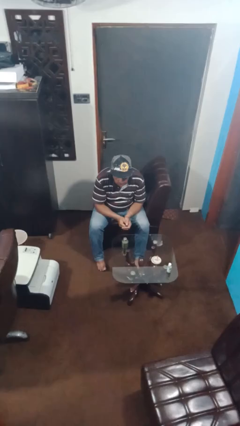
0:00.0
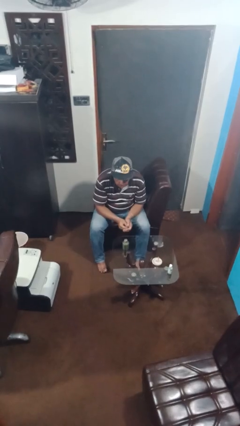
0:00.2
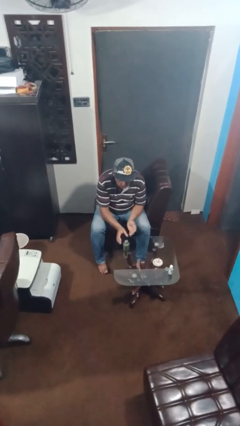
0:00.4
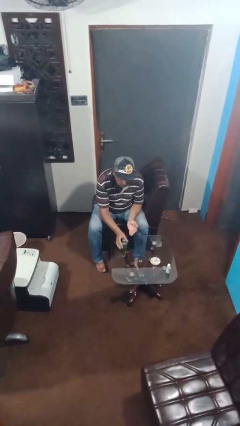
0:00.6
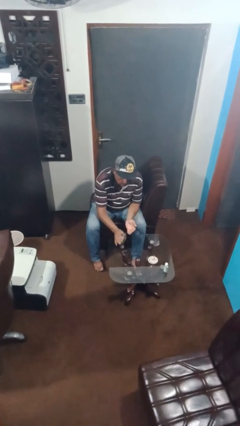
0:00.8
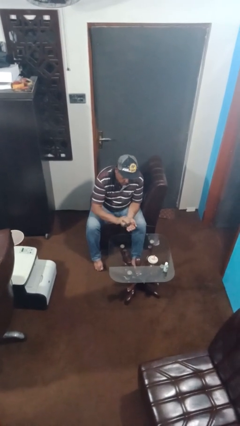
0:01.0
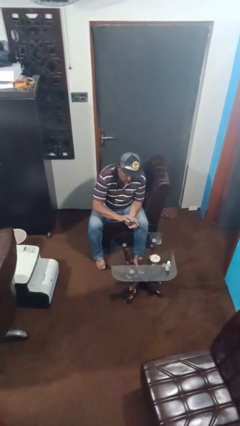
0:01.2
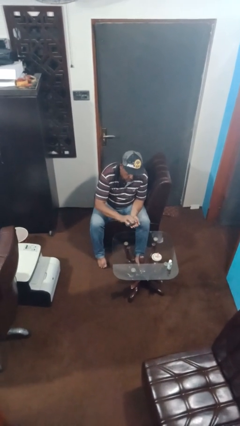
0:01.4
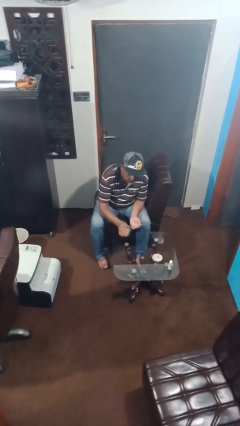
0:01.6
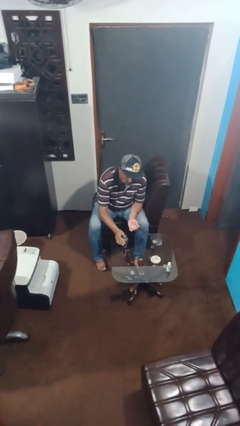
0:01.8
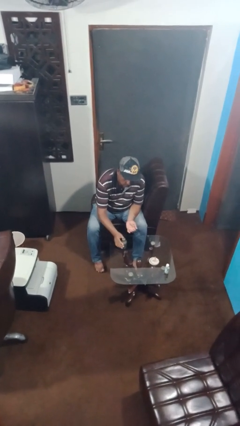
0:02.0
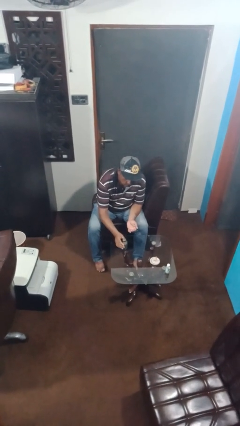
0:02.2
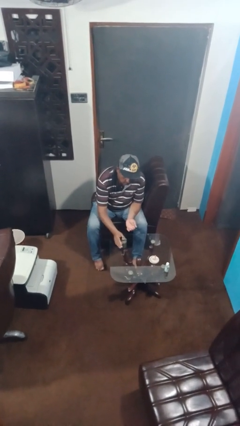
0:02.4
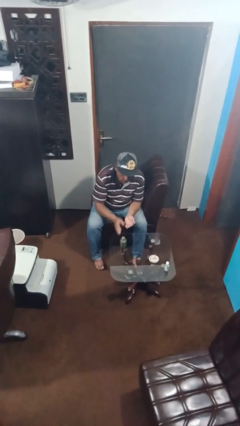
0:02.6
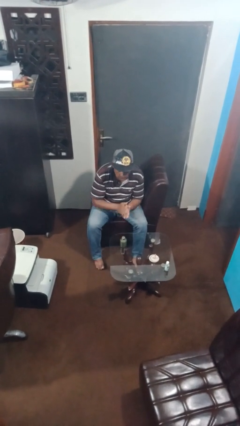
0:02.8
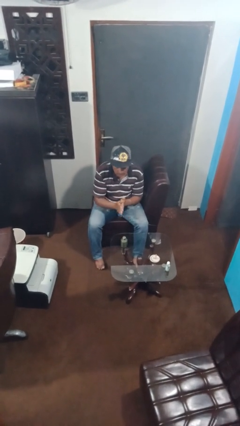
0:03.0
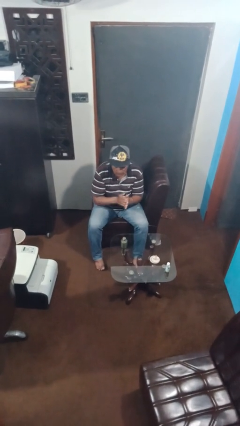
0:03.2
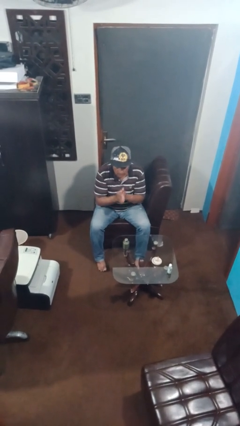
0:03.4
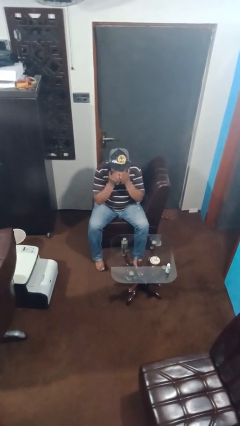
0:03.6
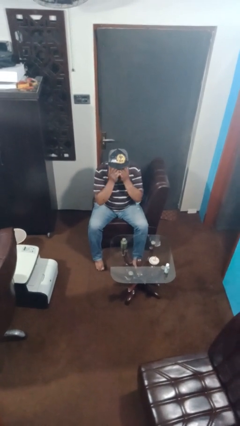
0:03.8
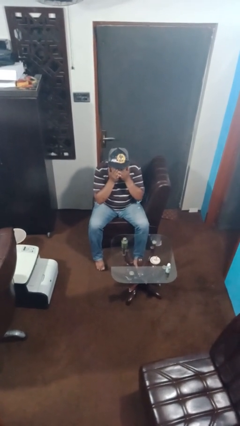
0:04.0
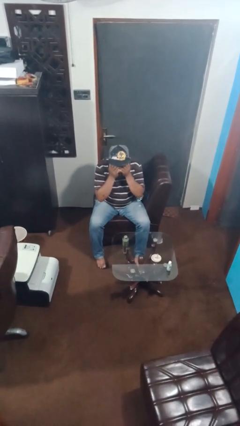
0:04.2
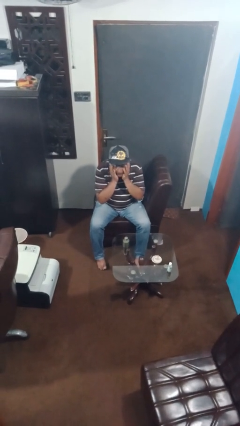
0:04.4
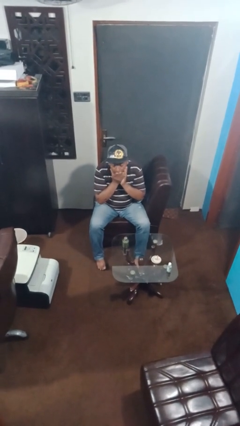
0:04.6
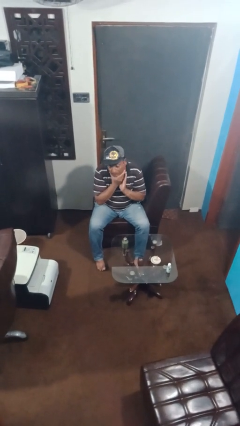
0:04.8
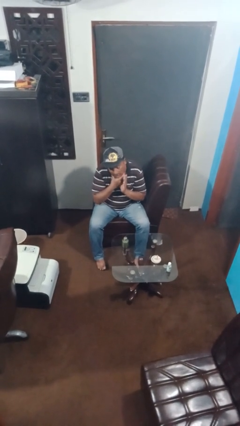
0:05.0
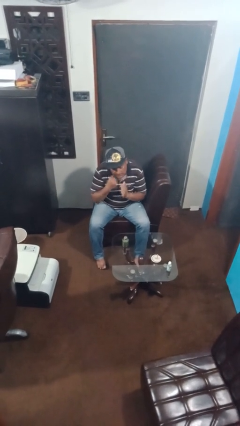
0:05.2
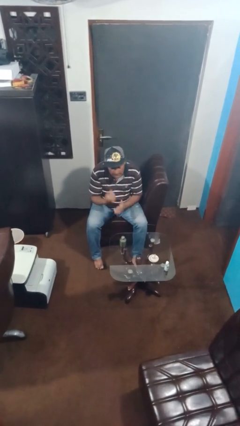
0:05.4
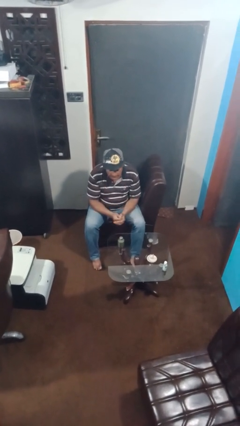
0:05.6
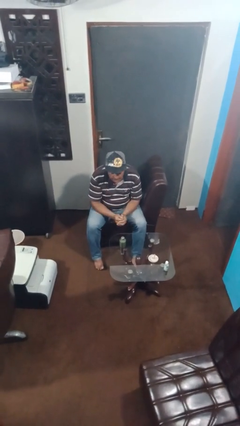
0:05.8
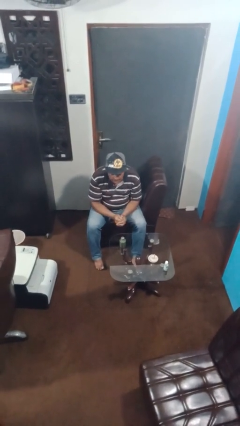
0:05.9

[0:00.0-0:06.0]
person applies facial moisturizer

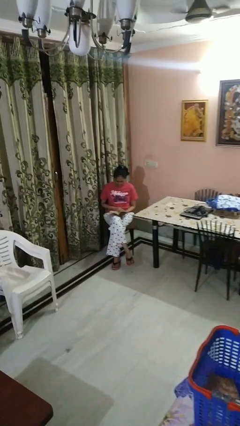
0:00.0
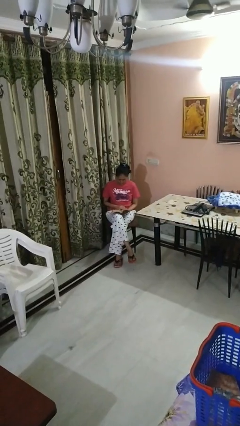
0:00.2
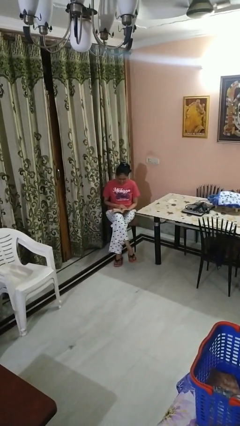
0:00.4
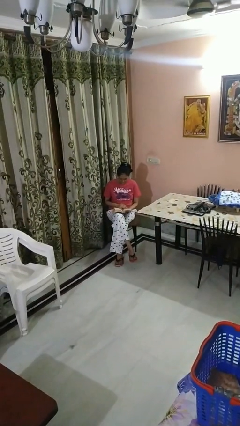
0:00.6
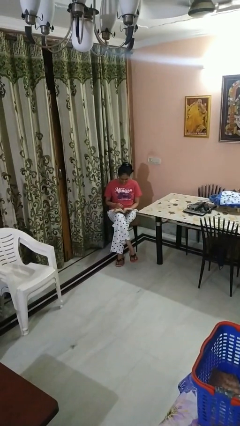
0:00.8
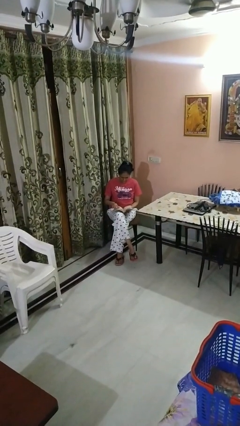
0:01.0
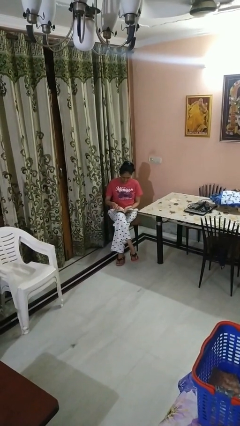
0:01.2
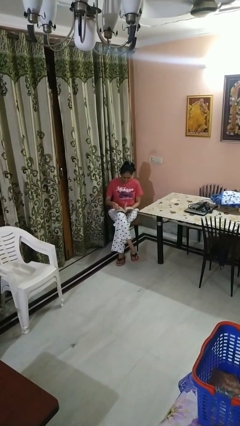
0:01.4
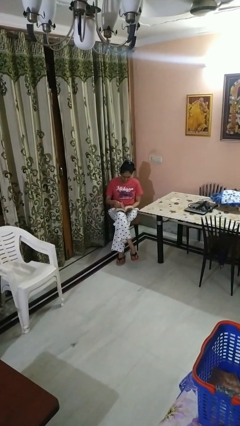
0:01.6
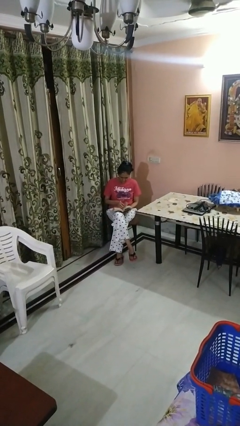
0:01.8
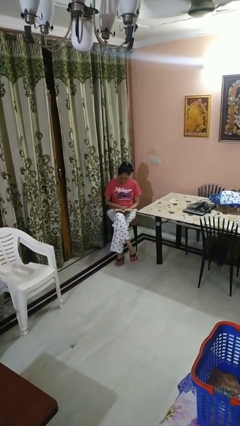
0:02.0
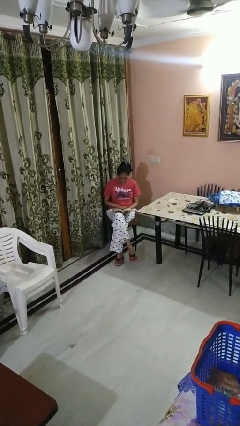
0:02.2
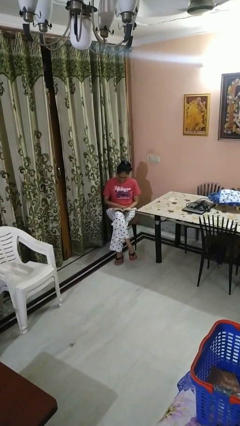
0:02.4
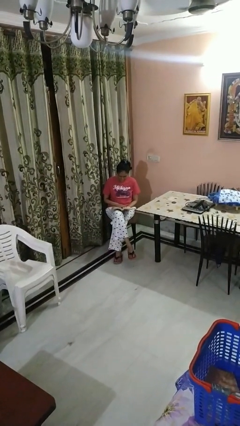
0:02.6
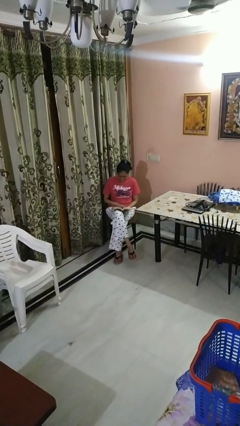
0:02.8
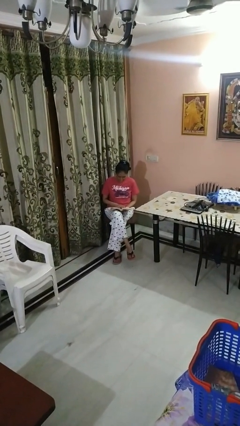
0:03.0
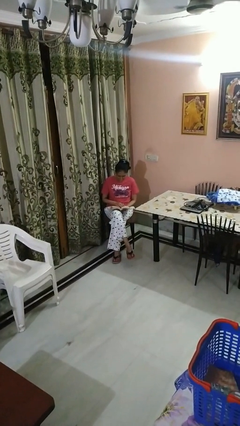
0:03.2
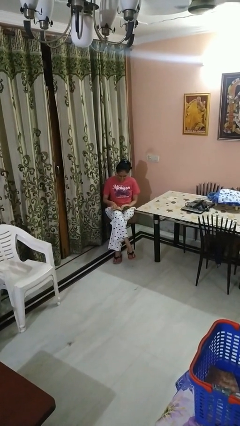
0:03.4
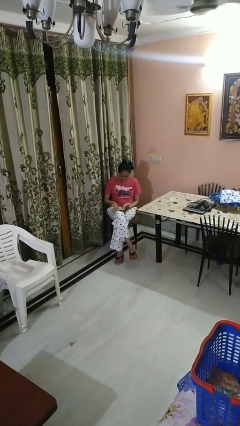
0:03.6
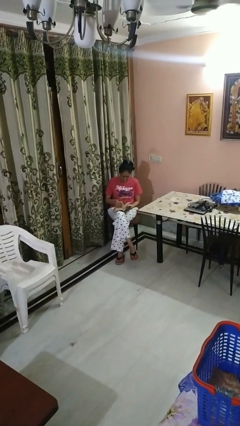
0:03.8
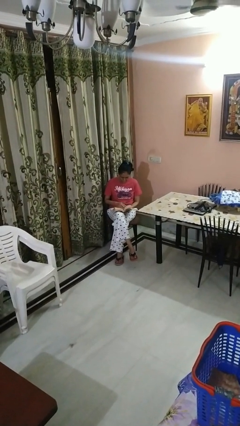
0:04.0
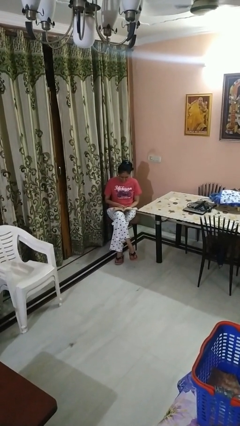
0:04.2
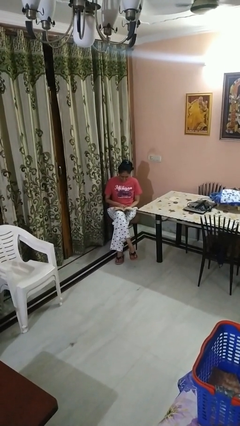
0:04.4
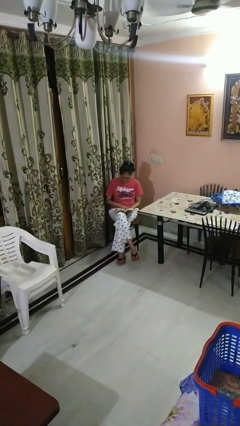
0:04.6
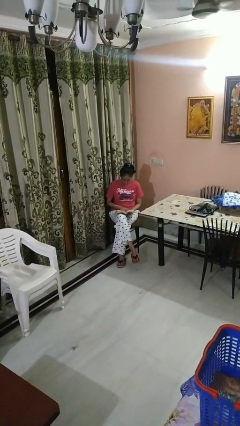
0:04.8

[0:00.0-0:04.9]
person reads book

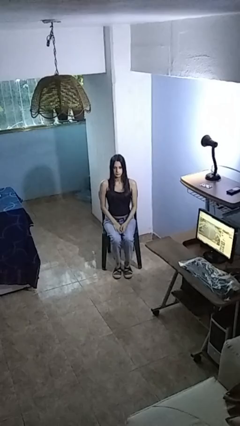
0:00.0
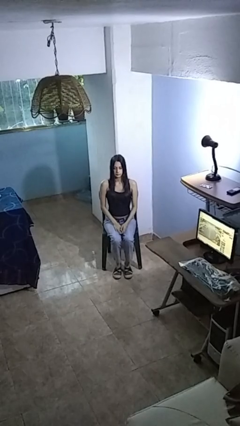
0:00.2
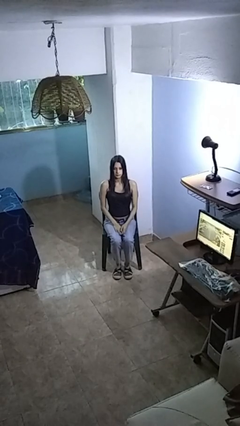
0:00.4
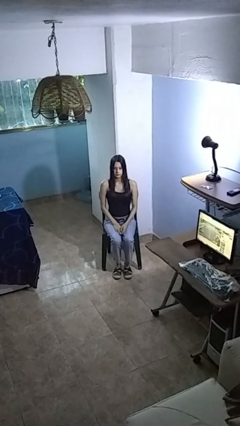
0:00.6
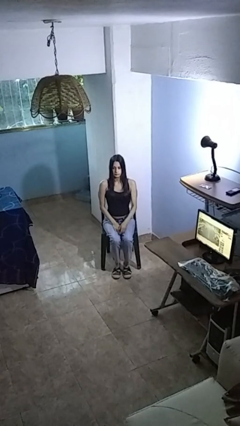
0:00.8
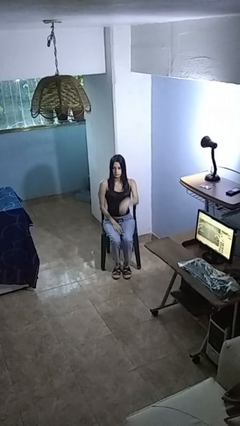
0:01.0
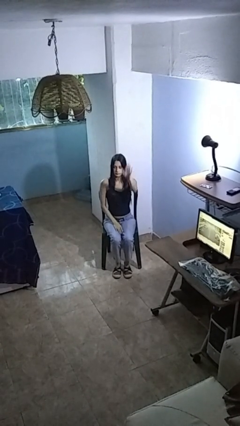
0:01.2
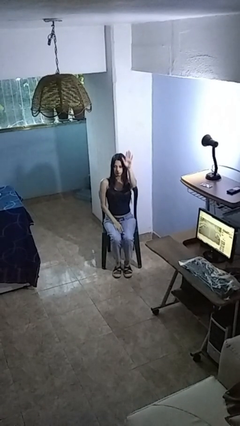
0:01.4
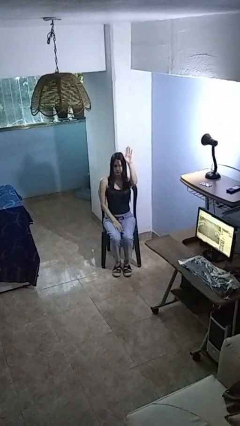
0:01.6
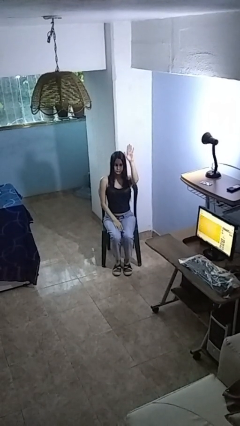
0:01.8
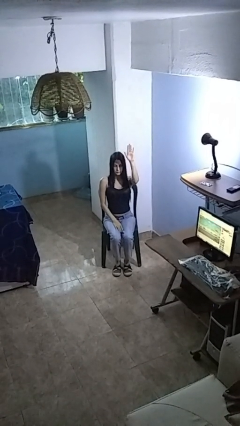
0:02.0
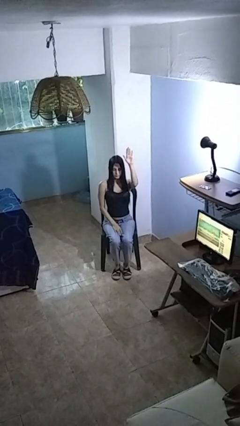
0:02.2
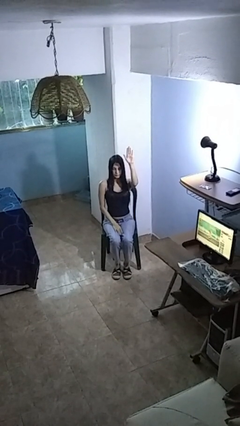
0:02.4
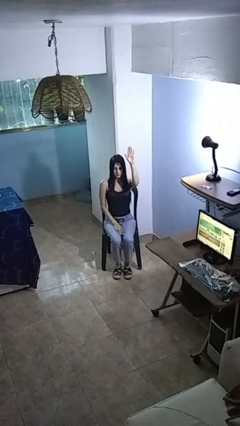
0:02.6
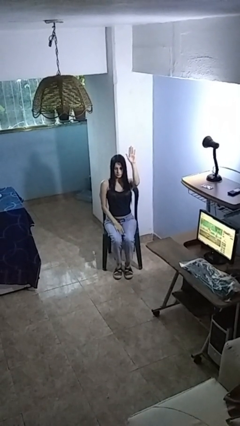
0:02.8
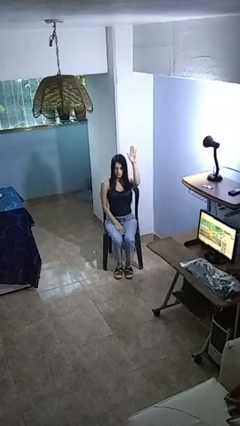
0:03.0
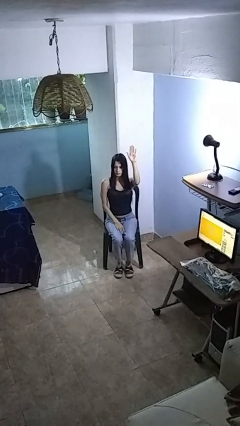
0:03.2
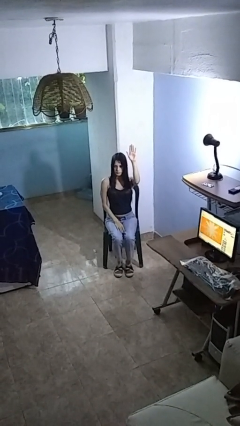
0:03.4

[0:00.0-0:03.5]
person gestures raise hand

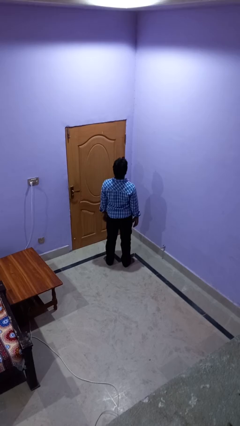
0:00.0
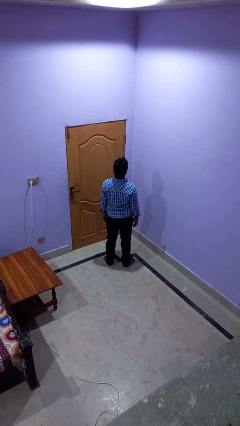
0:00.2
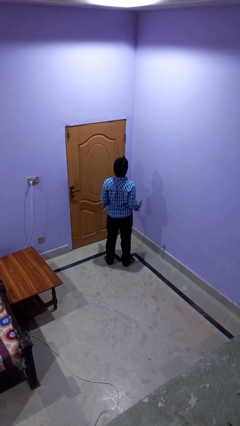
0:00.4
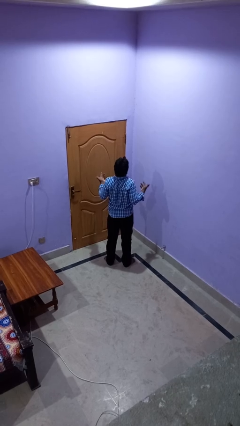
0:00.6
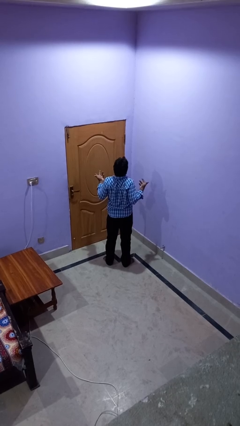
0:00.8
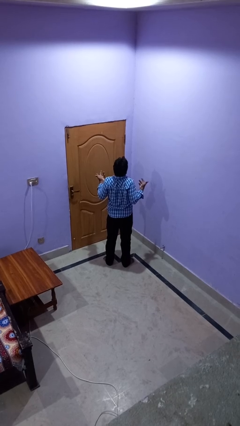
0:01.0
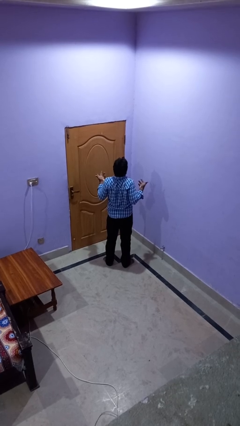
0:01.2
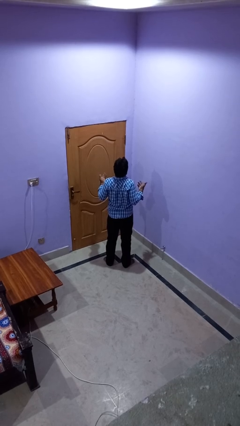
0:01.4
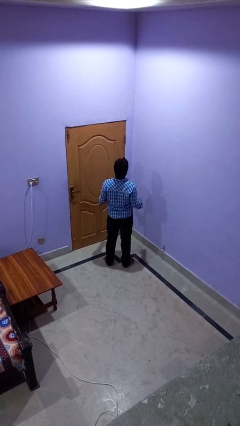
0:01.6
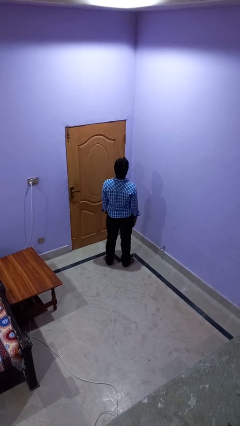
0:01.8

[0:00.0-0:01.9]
person shrugs

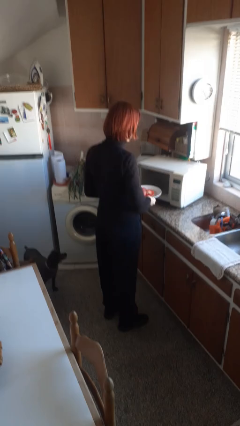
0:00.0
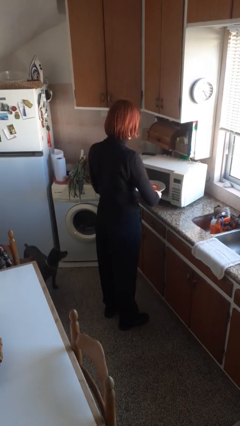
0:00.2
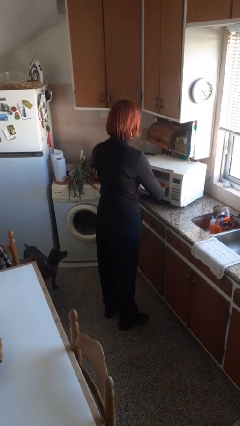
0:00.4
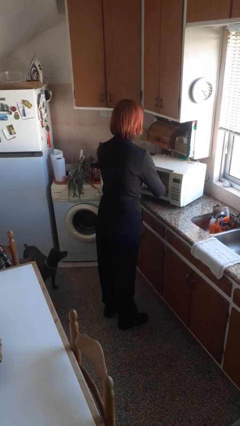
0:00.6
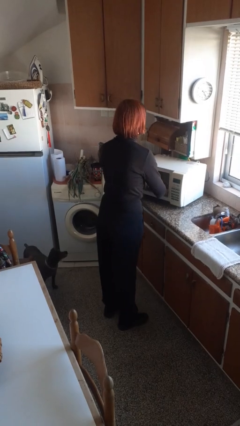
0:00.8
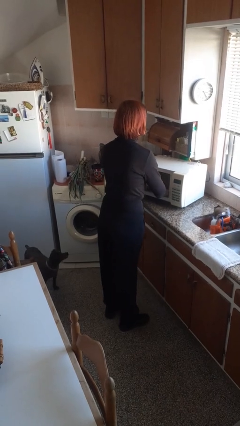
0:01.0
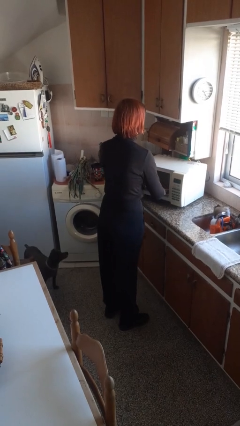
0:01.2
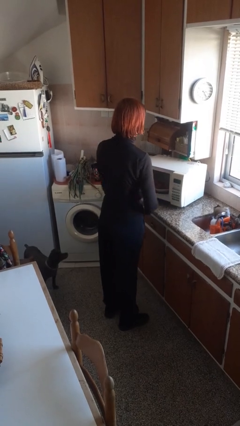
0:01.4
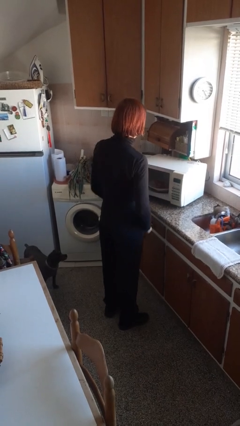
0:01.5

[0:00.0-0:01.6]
person puts object into microwave

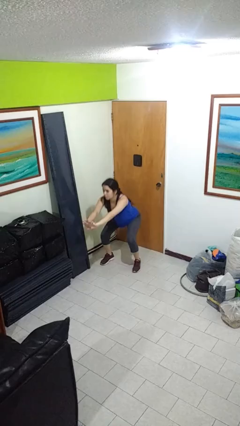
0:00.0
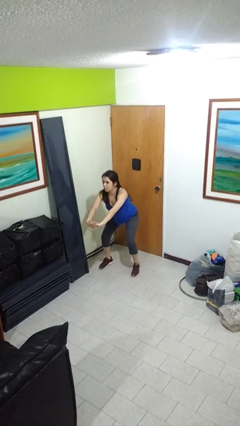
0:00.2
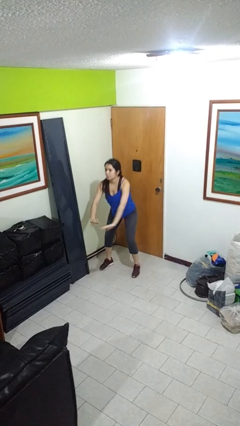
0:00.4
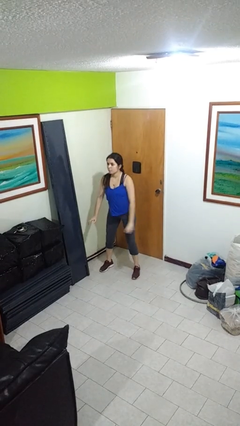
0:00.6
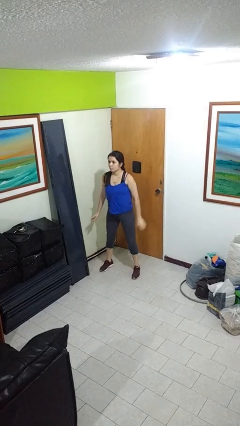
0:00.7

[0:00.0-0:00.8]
person stands up
